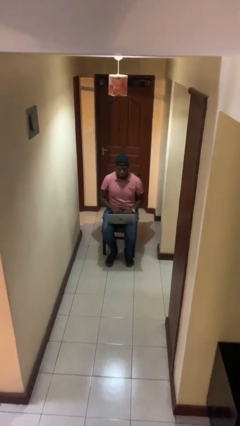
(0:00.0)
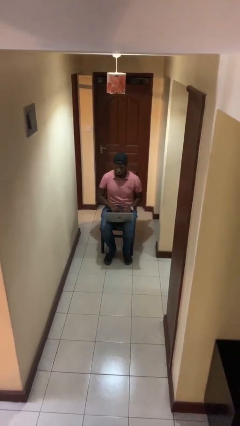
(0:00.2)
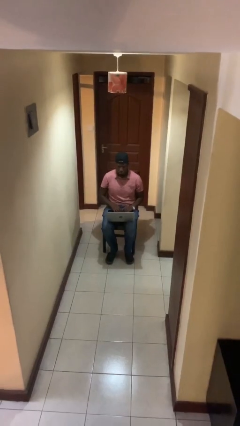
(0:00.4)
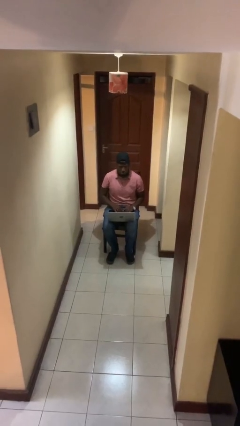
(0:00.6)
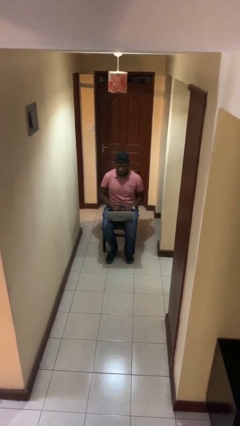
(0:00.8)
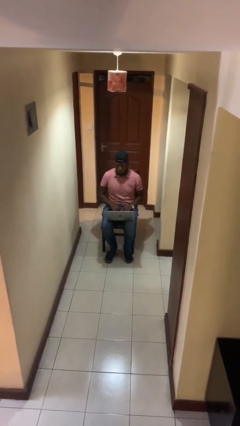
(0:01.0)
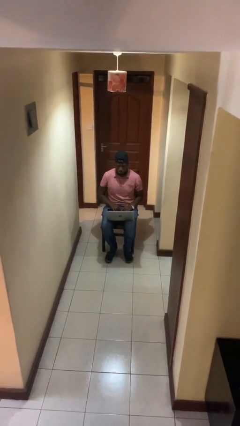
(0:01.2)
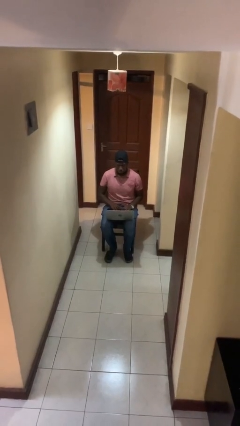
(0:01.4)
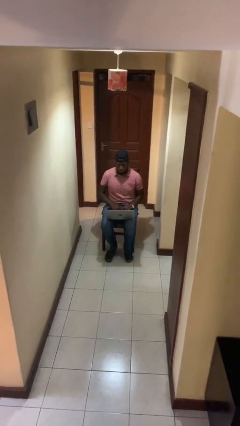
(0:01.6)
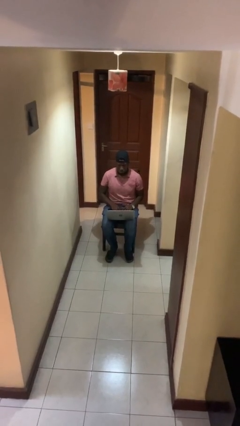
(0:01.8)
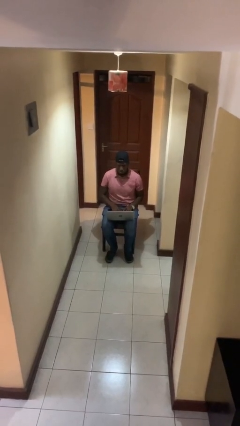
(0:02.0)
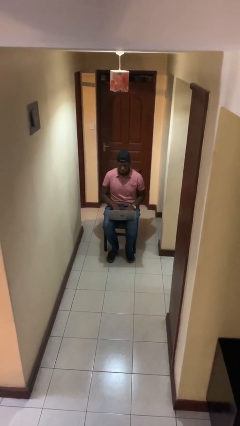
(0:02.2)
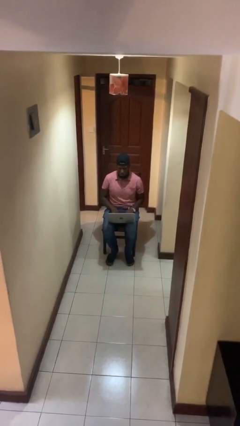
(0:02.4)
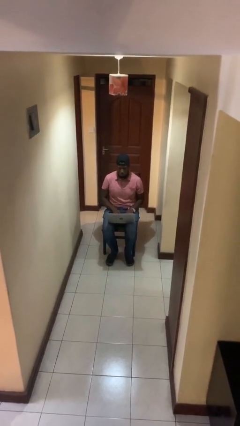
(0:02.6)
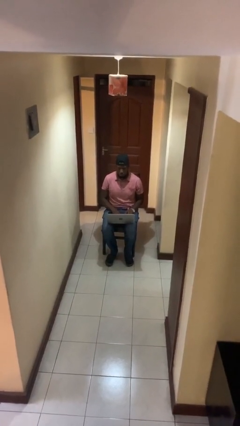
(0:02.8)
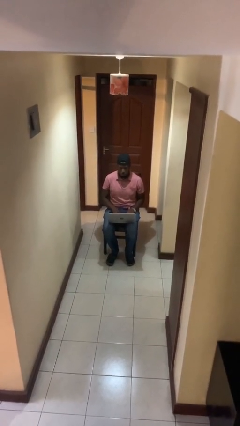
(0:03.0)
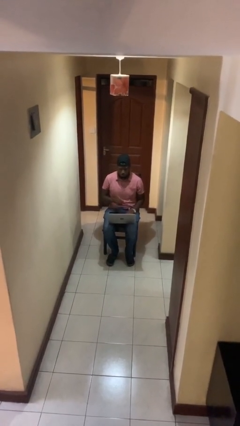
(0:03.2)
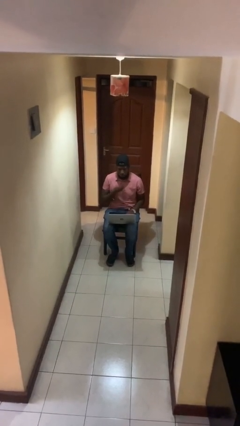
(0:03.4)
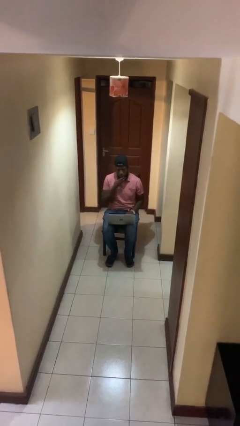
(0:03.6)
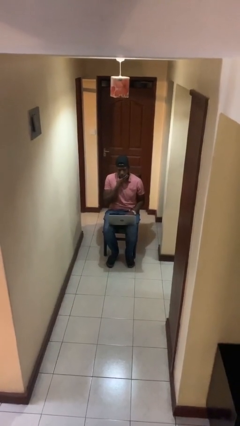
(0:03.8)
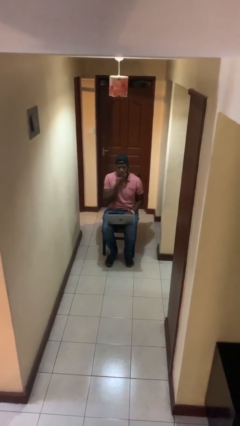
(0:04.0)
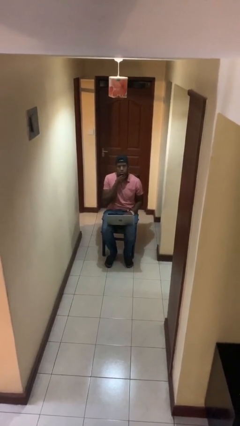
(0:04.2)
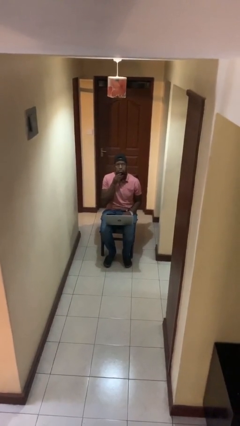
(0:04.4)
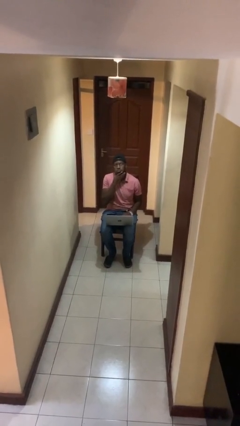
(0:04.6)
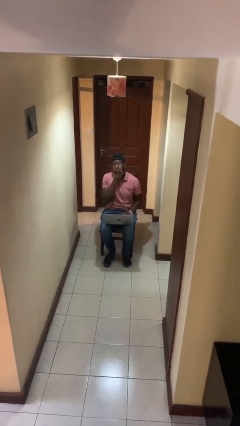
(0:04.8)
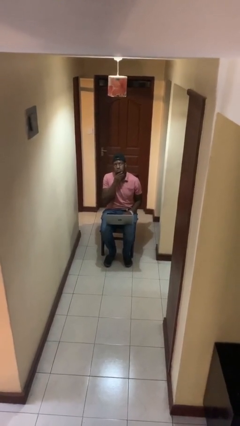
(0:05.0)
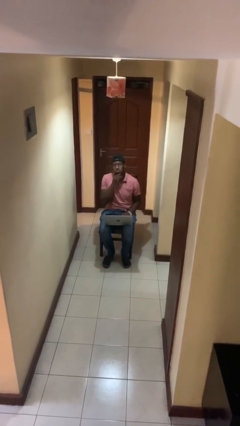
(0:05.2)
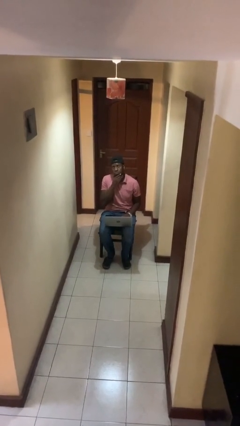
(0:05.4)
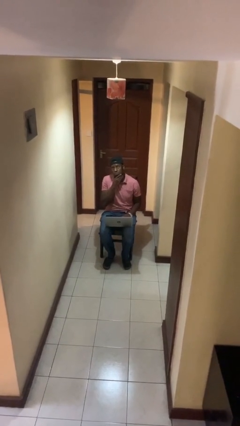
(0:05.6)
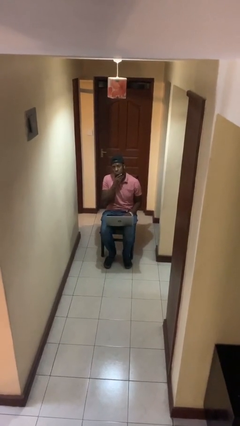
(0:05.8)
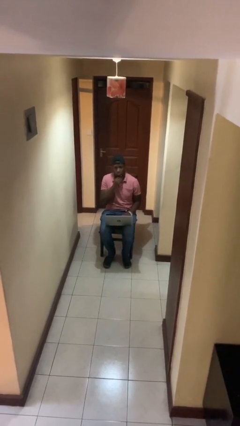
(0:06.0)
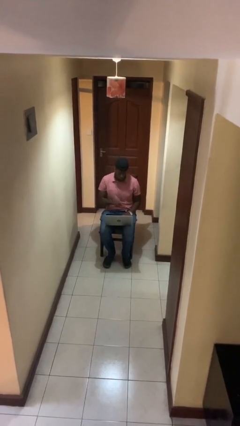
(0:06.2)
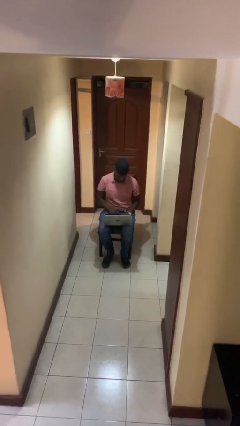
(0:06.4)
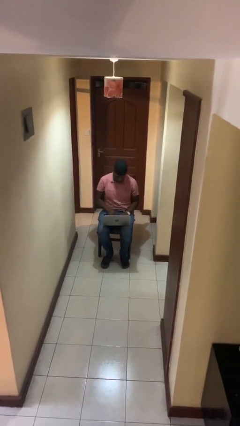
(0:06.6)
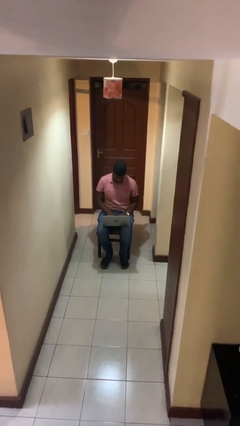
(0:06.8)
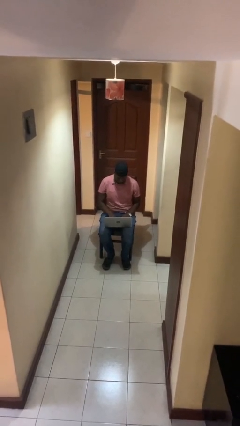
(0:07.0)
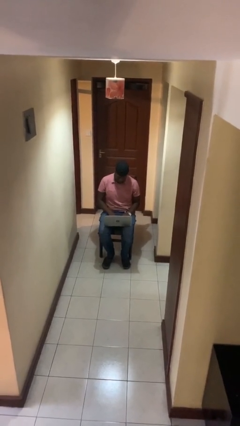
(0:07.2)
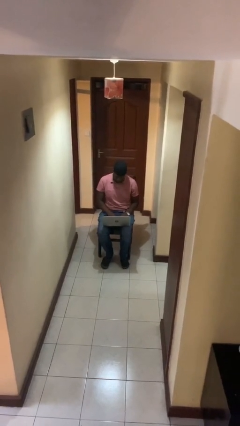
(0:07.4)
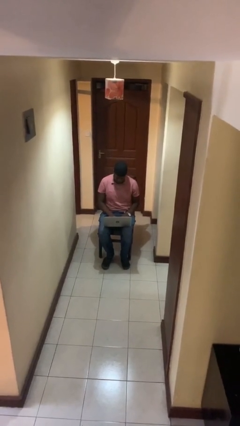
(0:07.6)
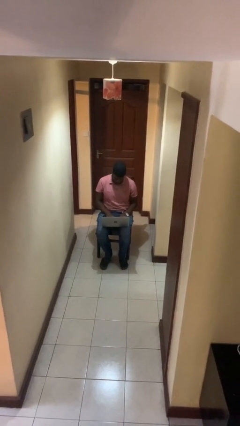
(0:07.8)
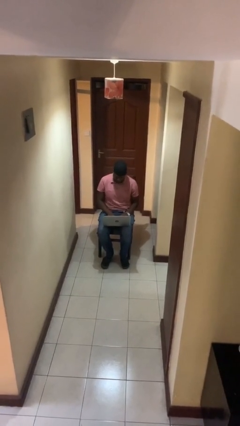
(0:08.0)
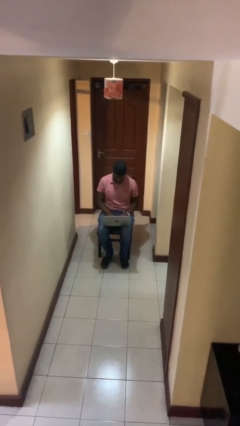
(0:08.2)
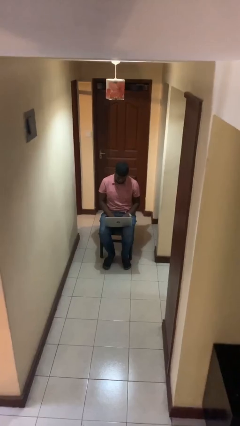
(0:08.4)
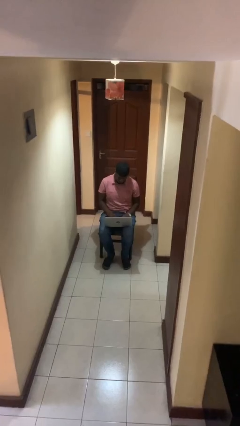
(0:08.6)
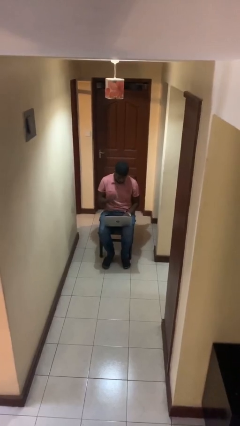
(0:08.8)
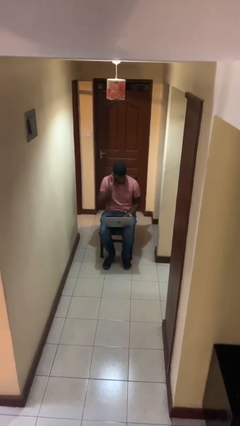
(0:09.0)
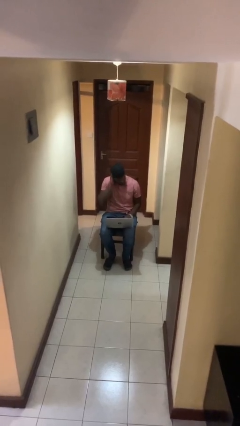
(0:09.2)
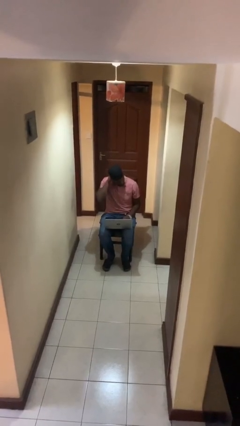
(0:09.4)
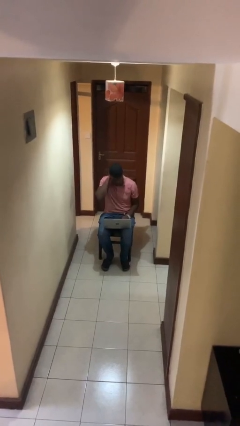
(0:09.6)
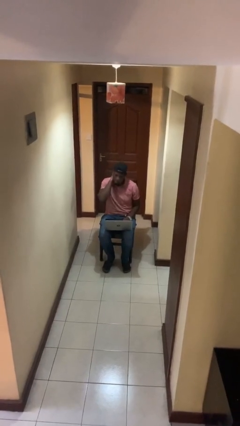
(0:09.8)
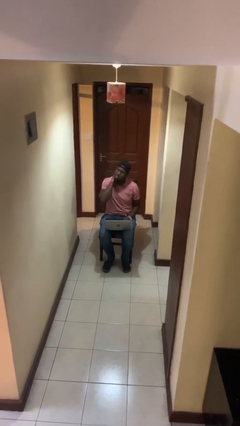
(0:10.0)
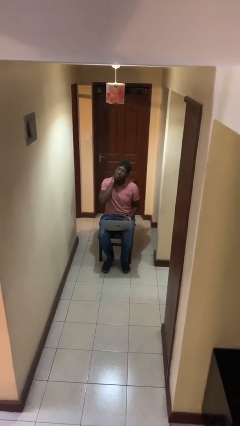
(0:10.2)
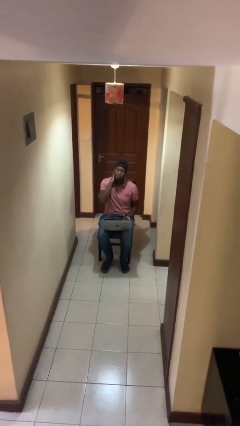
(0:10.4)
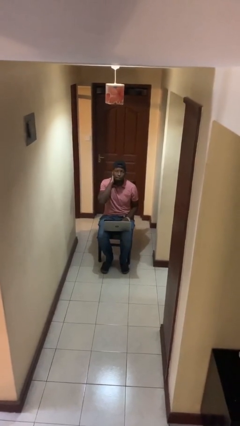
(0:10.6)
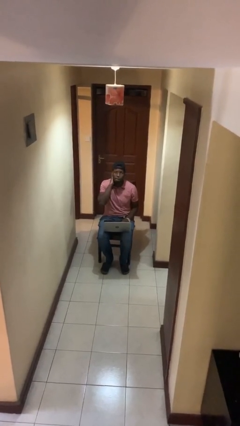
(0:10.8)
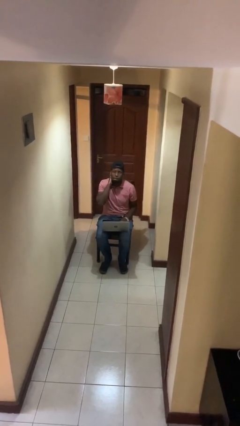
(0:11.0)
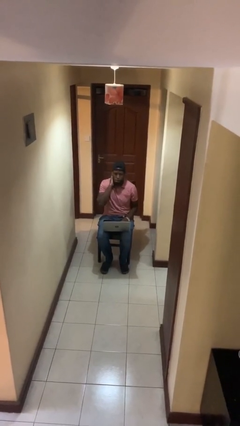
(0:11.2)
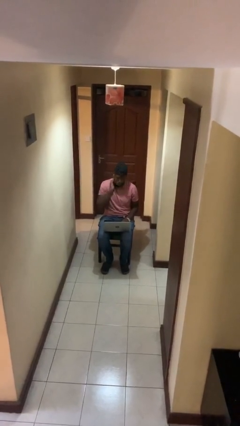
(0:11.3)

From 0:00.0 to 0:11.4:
person interacts with laptop

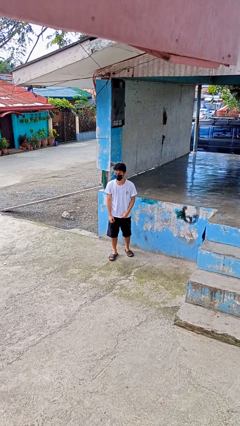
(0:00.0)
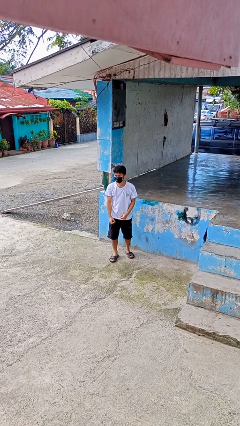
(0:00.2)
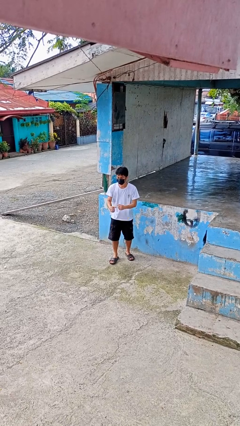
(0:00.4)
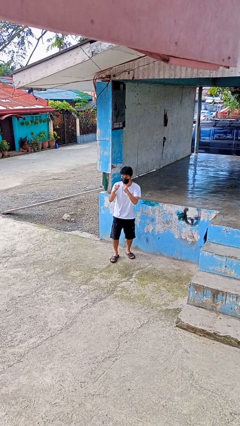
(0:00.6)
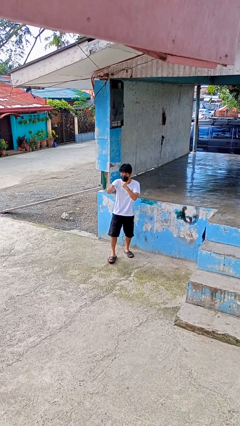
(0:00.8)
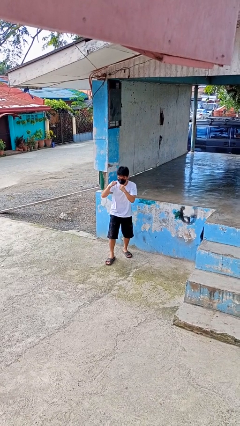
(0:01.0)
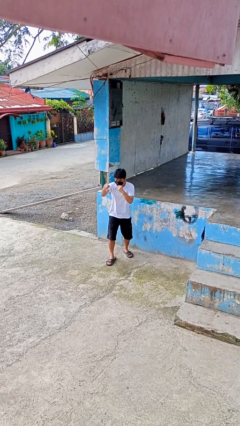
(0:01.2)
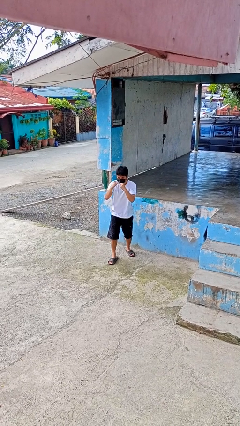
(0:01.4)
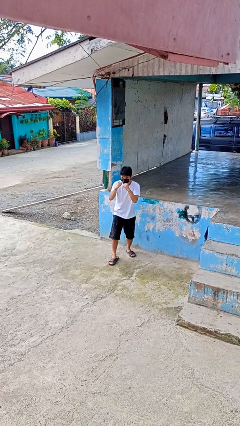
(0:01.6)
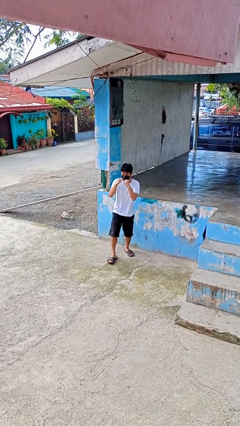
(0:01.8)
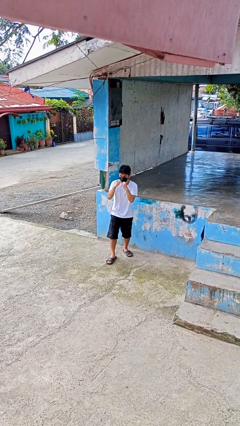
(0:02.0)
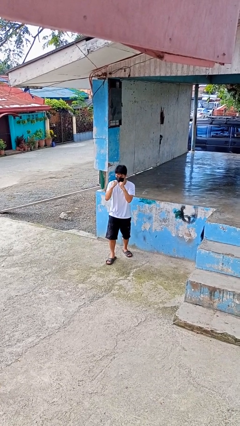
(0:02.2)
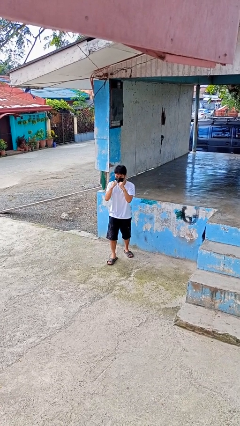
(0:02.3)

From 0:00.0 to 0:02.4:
person punches

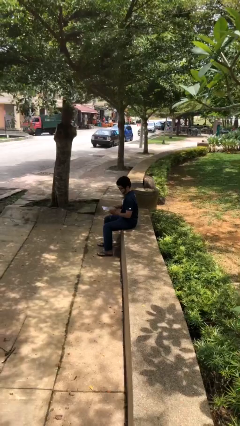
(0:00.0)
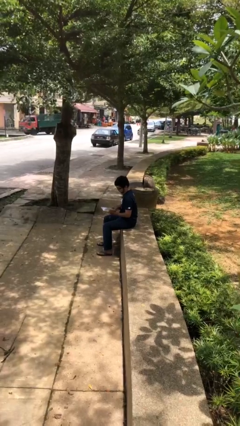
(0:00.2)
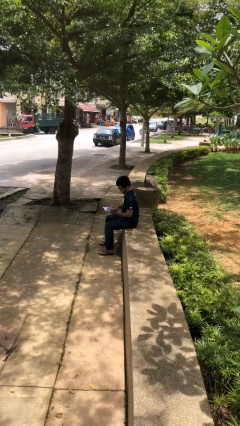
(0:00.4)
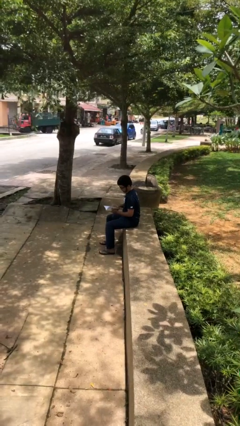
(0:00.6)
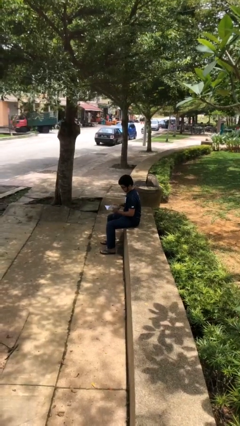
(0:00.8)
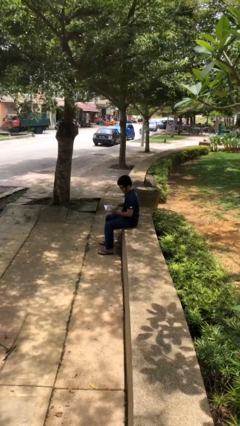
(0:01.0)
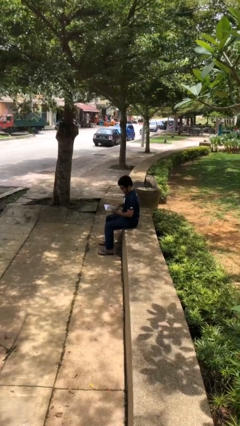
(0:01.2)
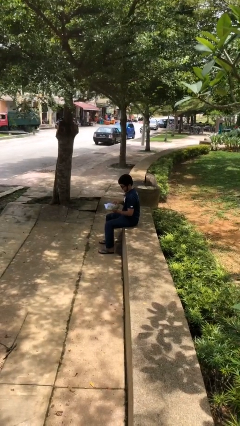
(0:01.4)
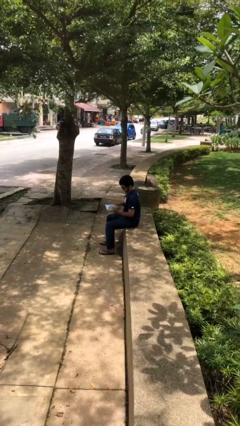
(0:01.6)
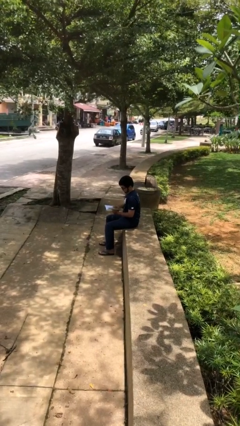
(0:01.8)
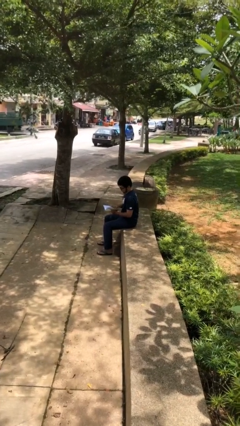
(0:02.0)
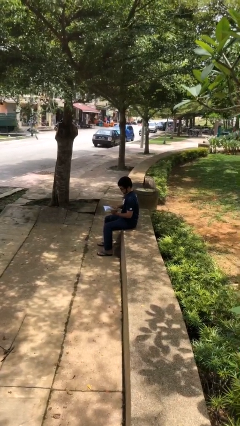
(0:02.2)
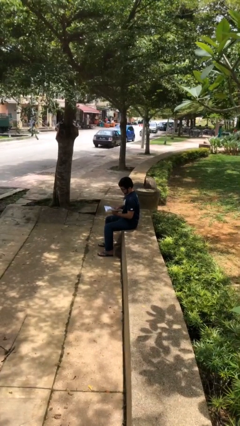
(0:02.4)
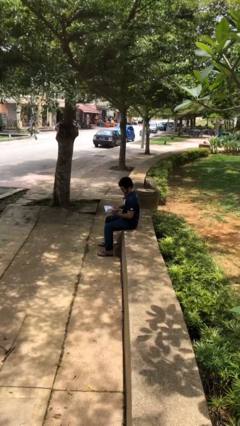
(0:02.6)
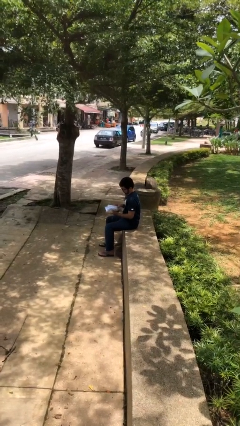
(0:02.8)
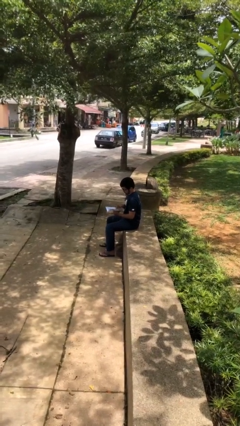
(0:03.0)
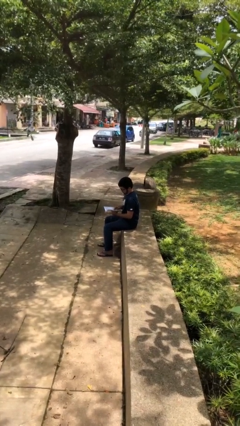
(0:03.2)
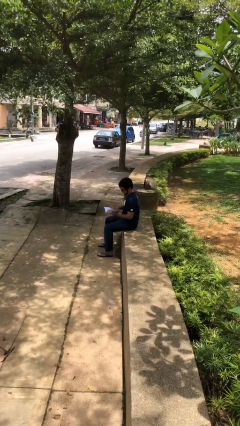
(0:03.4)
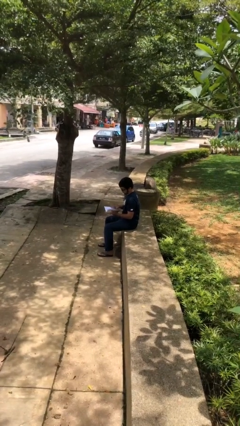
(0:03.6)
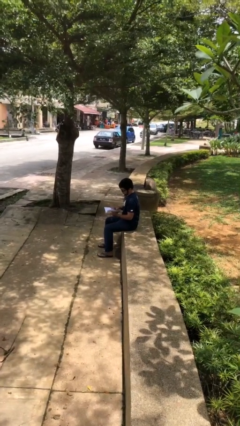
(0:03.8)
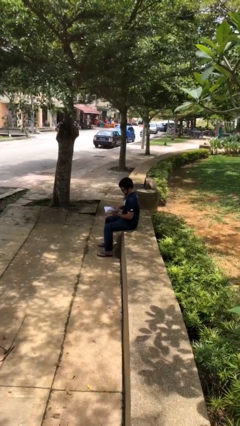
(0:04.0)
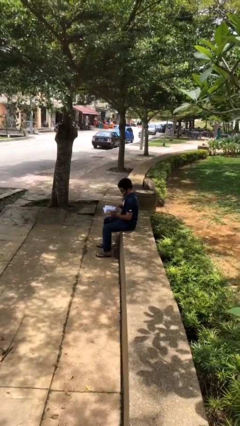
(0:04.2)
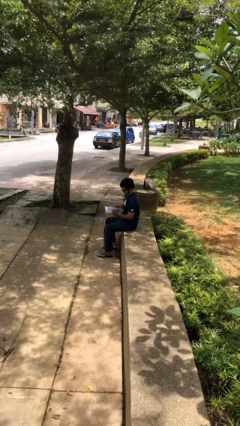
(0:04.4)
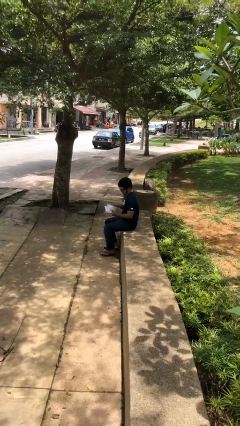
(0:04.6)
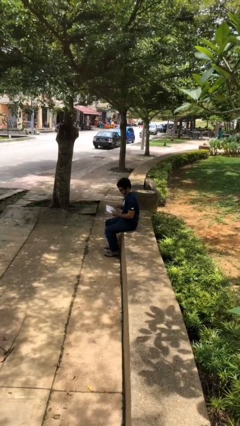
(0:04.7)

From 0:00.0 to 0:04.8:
person reads document
